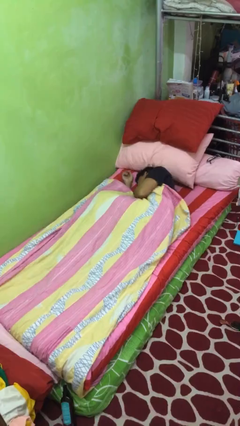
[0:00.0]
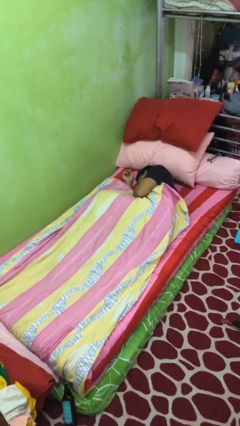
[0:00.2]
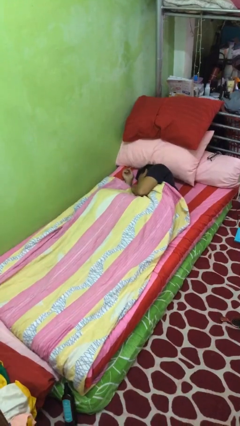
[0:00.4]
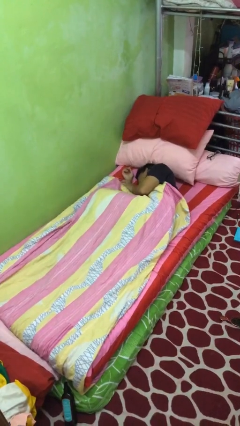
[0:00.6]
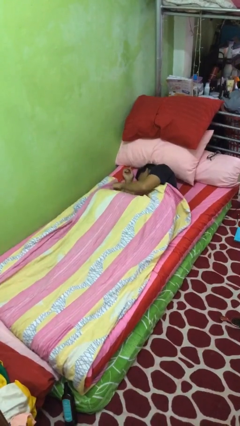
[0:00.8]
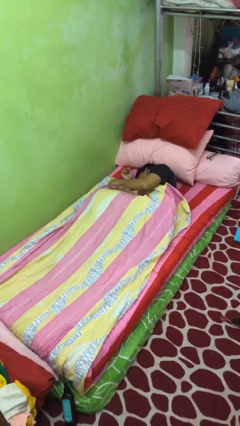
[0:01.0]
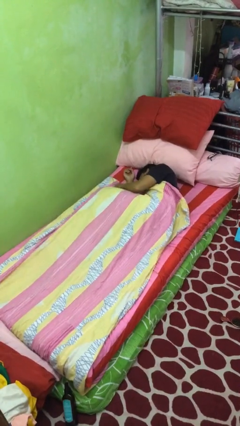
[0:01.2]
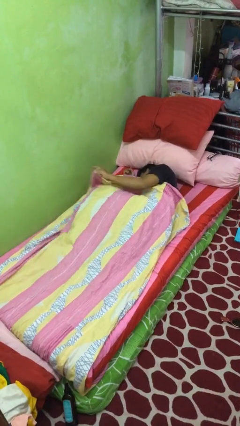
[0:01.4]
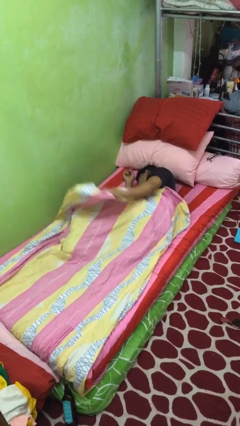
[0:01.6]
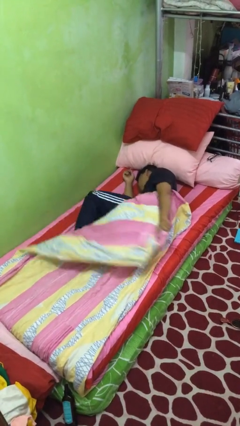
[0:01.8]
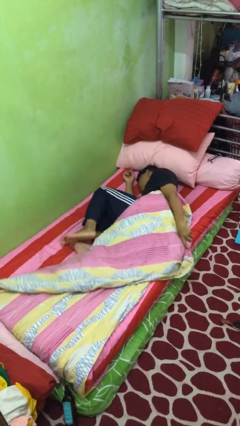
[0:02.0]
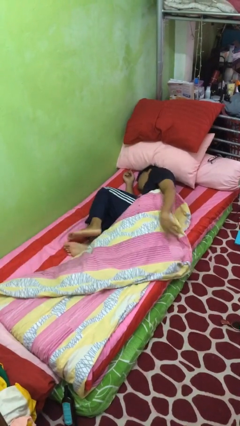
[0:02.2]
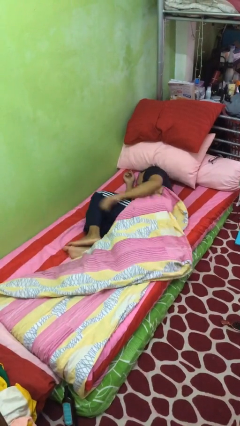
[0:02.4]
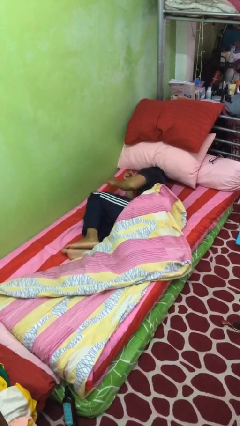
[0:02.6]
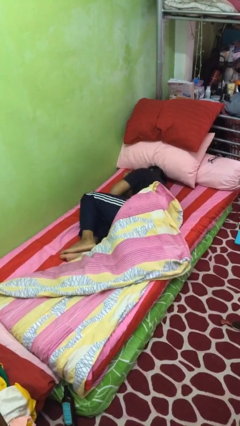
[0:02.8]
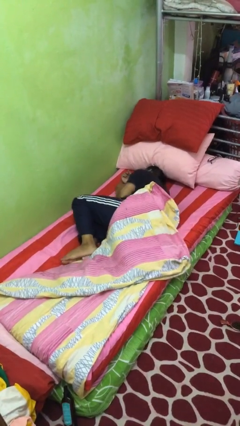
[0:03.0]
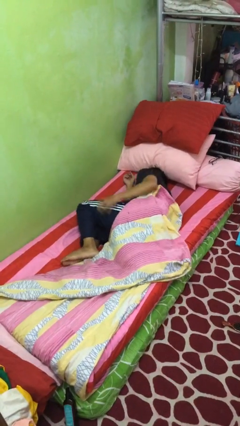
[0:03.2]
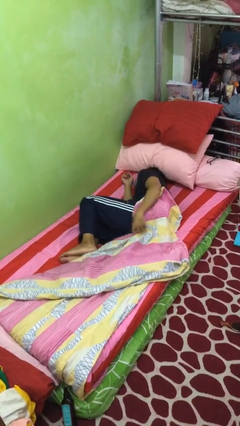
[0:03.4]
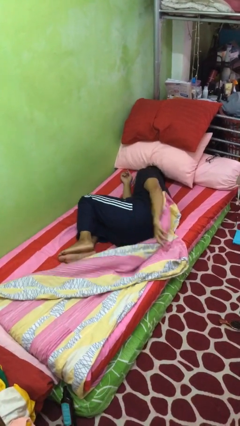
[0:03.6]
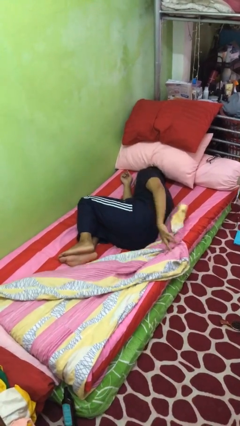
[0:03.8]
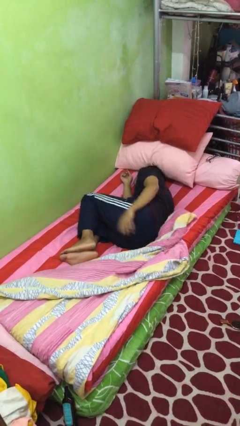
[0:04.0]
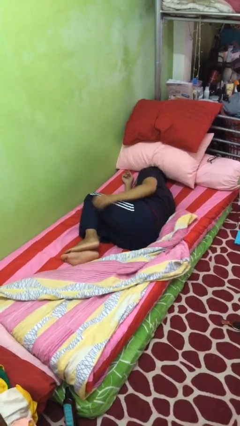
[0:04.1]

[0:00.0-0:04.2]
person uncovers with bedsheets

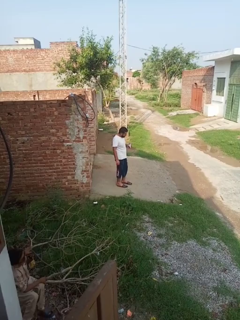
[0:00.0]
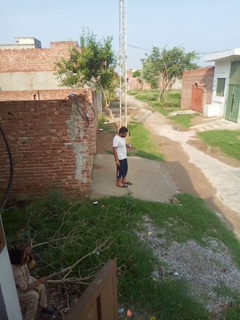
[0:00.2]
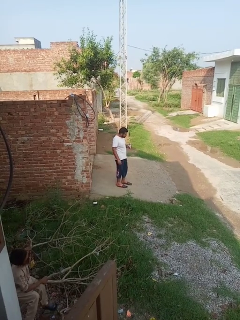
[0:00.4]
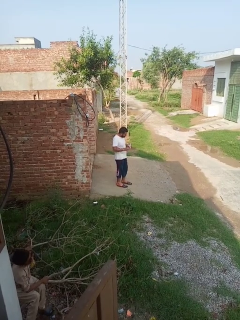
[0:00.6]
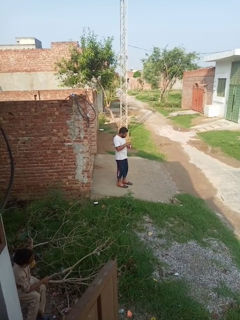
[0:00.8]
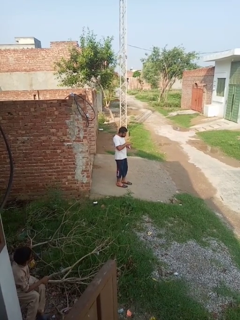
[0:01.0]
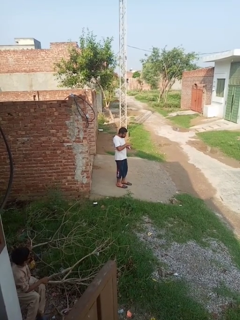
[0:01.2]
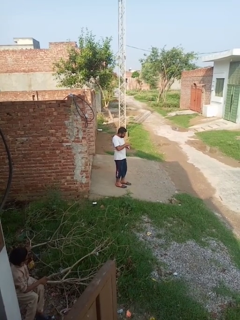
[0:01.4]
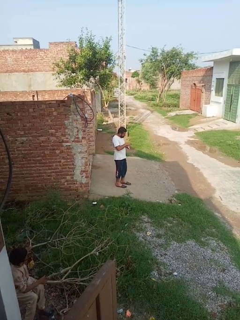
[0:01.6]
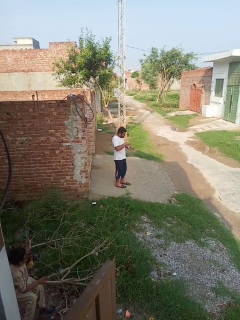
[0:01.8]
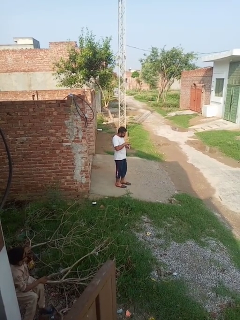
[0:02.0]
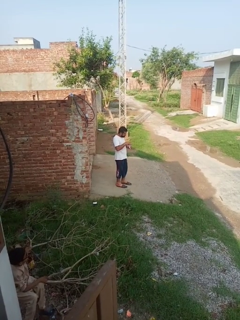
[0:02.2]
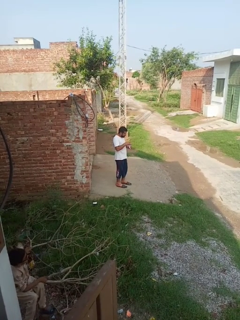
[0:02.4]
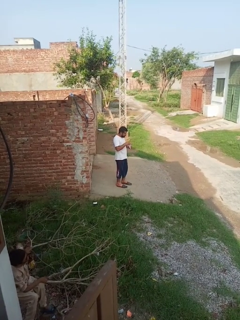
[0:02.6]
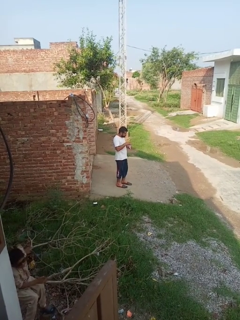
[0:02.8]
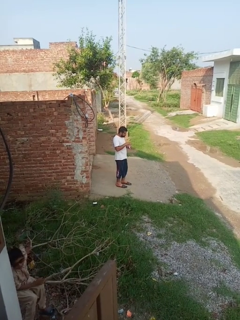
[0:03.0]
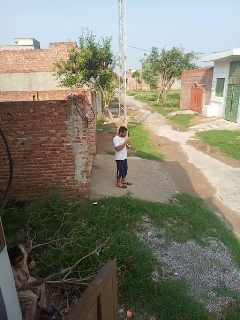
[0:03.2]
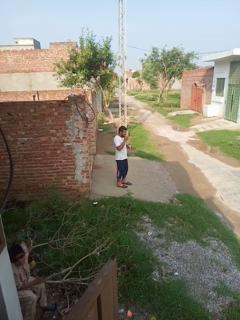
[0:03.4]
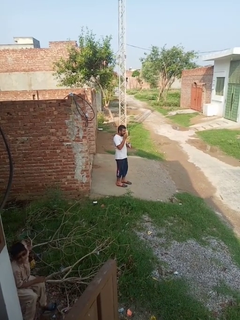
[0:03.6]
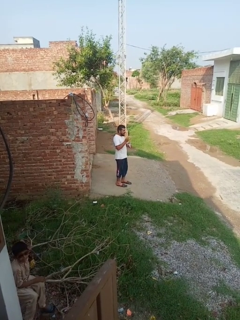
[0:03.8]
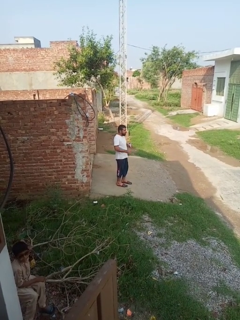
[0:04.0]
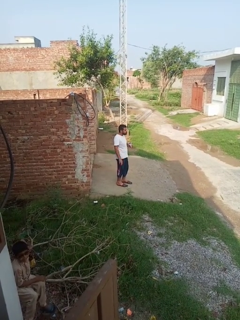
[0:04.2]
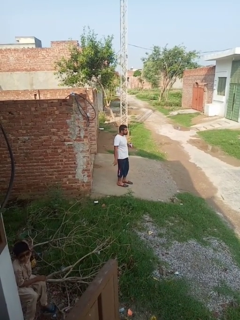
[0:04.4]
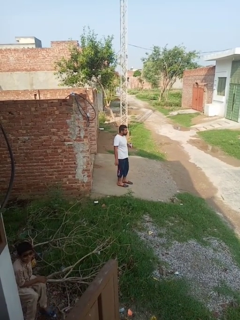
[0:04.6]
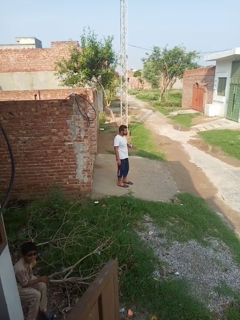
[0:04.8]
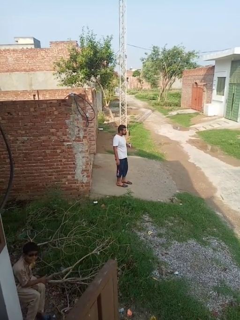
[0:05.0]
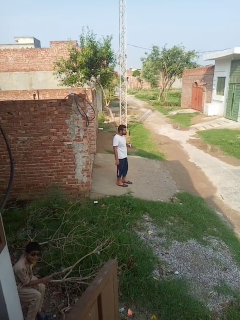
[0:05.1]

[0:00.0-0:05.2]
person eats snack from bag

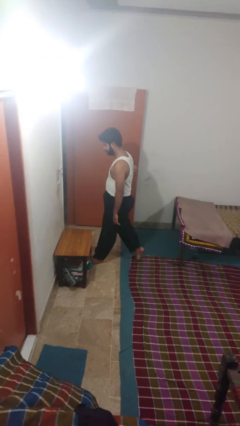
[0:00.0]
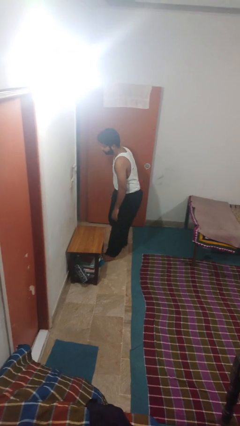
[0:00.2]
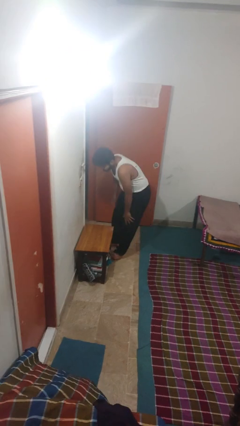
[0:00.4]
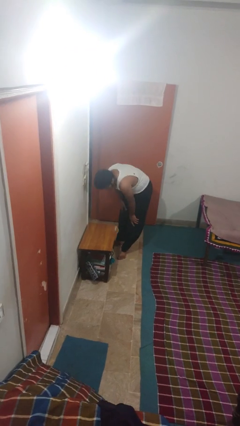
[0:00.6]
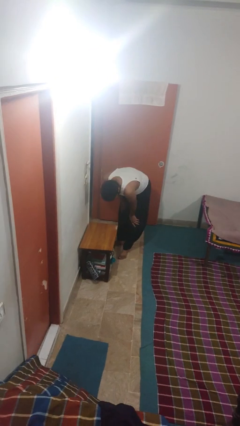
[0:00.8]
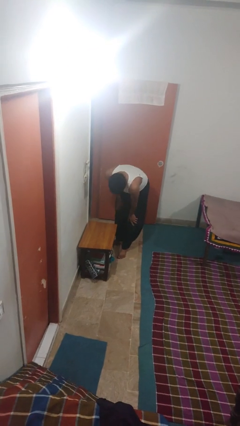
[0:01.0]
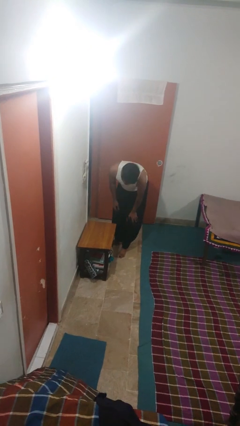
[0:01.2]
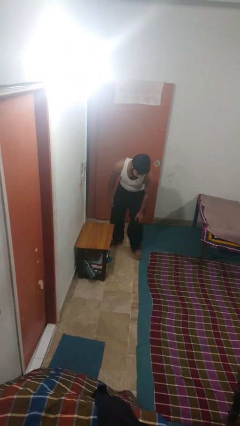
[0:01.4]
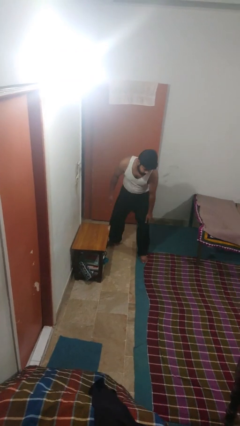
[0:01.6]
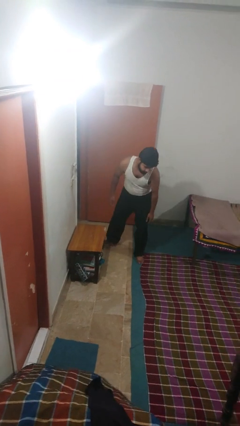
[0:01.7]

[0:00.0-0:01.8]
person bumps into table

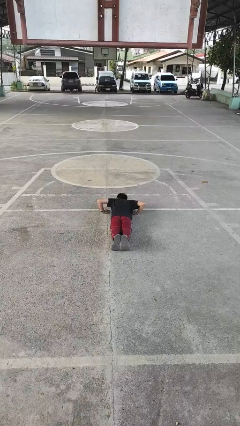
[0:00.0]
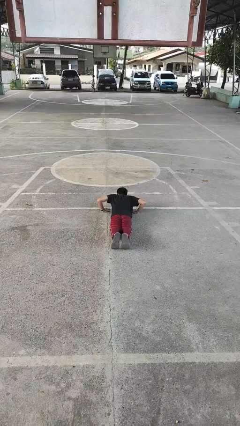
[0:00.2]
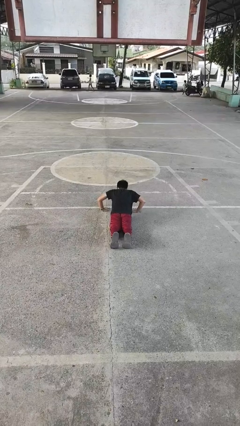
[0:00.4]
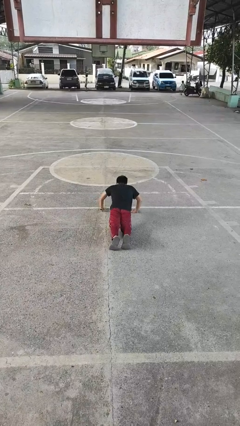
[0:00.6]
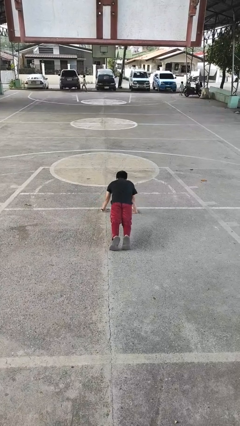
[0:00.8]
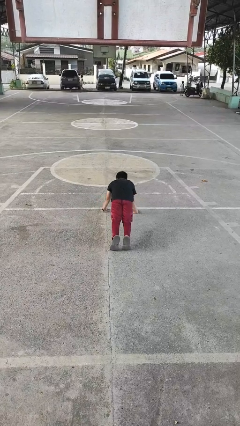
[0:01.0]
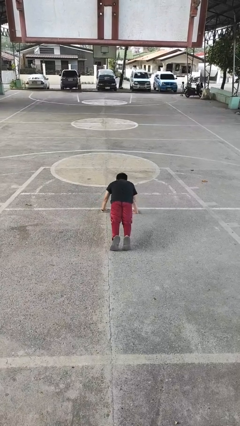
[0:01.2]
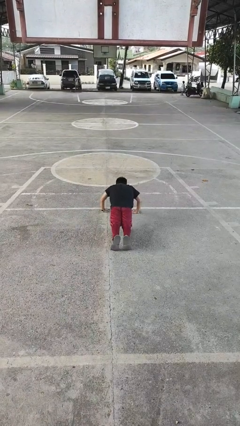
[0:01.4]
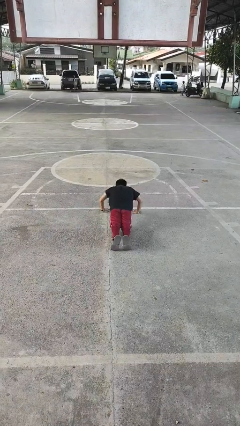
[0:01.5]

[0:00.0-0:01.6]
person exercises with pushup

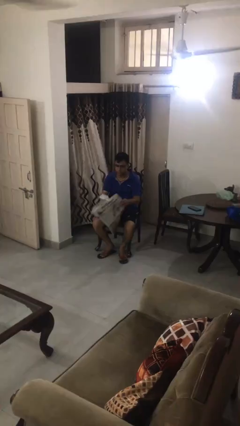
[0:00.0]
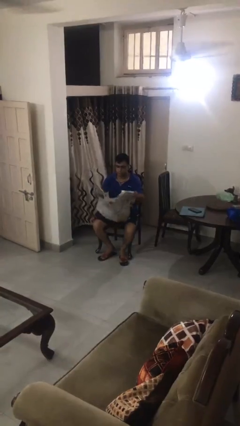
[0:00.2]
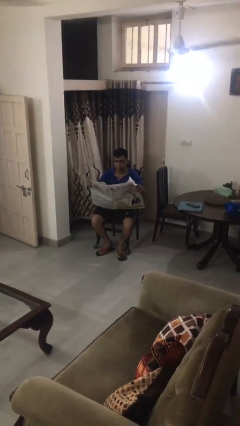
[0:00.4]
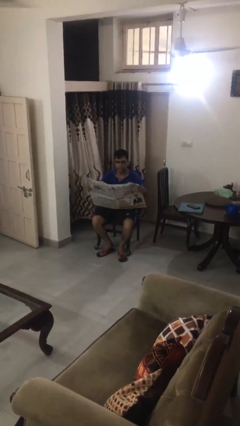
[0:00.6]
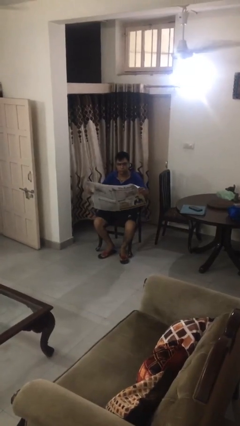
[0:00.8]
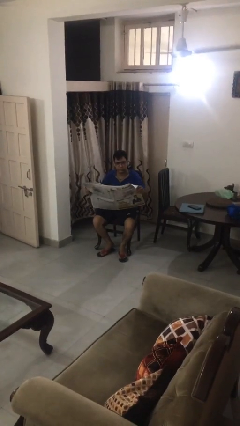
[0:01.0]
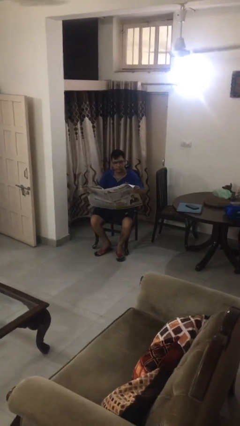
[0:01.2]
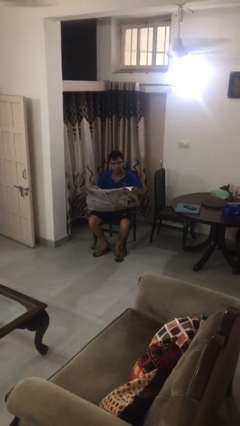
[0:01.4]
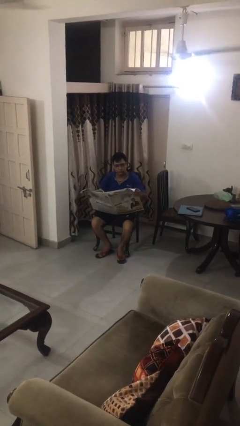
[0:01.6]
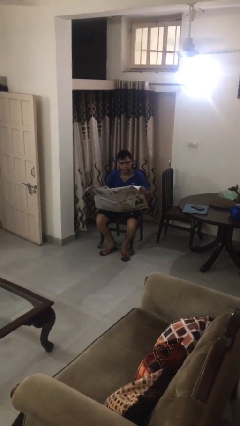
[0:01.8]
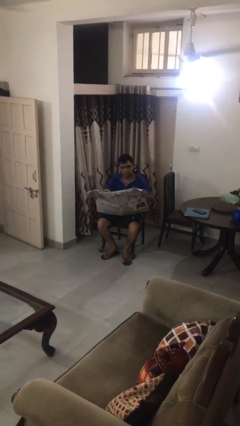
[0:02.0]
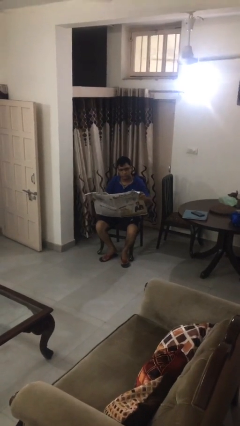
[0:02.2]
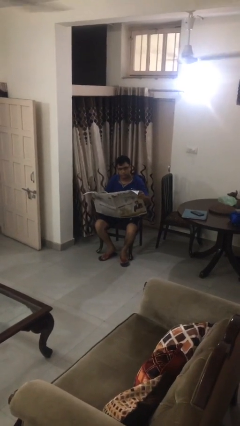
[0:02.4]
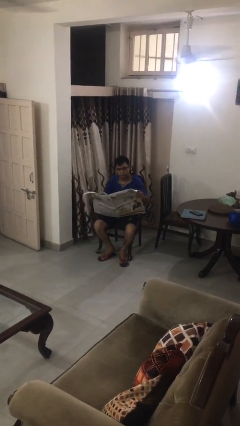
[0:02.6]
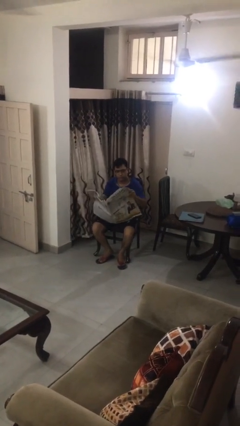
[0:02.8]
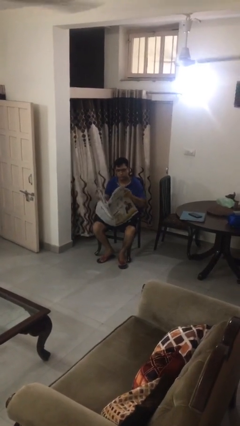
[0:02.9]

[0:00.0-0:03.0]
person reads newspaper

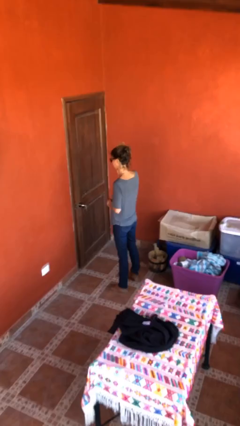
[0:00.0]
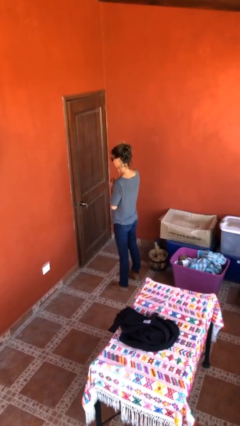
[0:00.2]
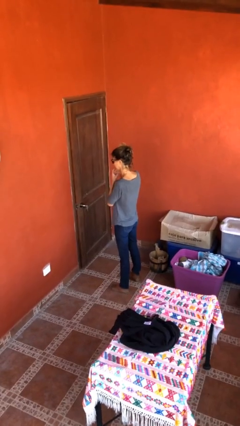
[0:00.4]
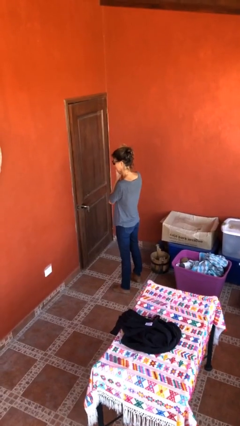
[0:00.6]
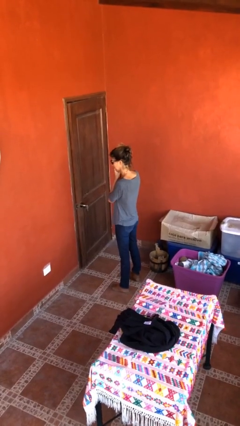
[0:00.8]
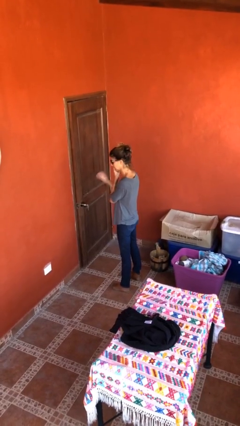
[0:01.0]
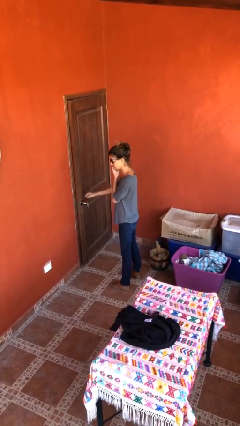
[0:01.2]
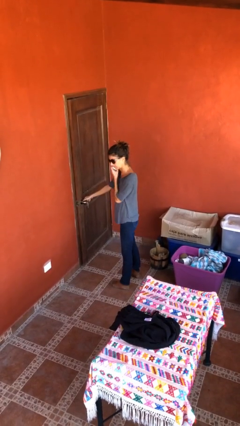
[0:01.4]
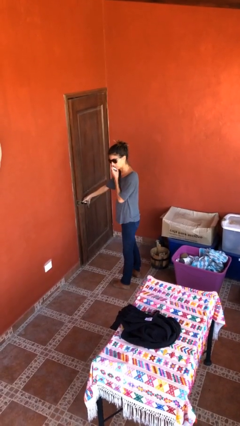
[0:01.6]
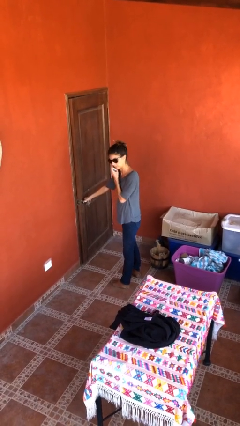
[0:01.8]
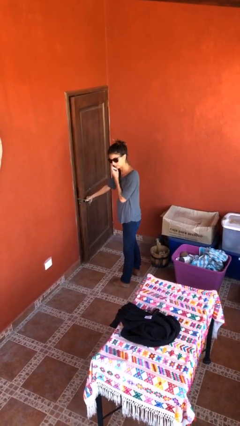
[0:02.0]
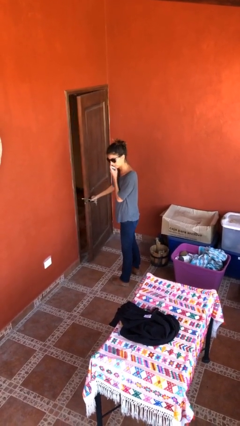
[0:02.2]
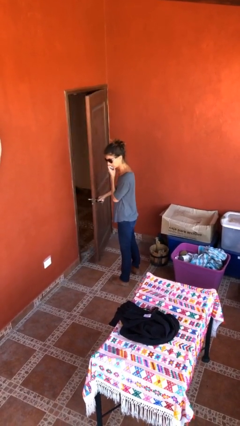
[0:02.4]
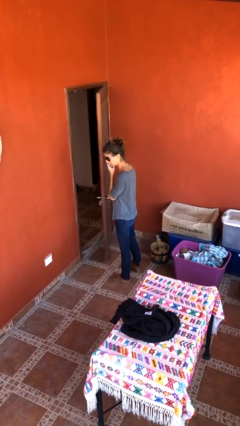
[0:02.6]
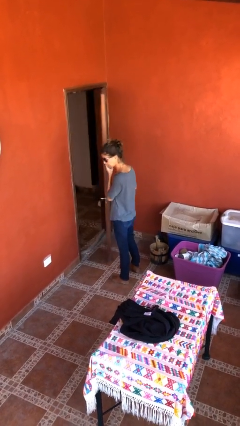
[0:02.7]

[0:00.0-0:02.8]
person opens facility door
